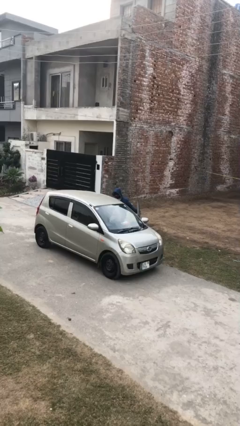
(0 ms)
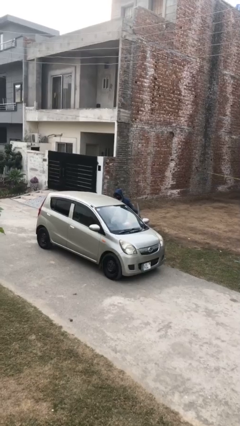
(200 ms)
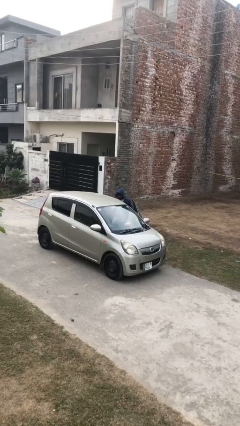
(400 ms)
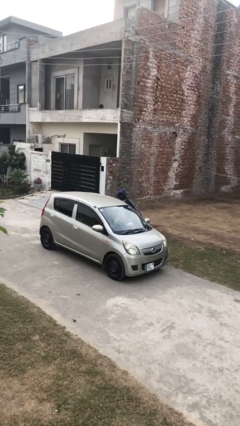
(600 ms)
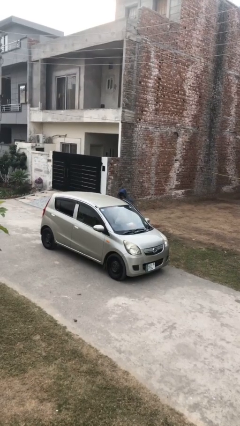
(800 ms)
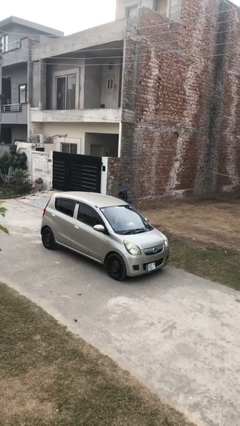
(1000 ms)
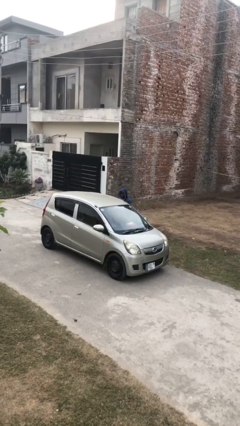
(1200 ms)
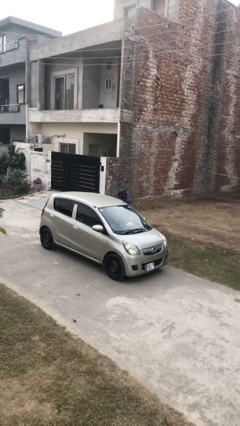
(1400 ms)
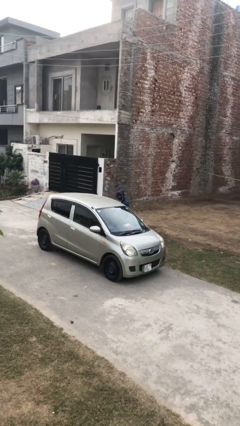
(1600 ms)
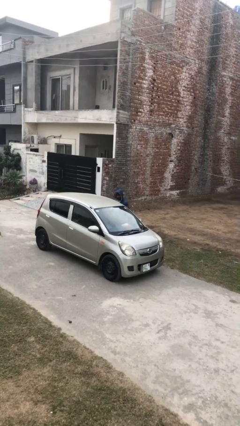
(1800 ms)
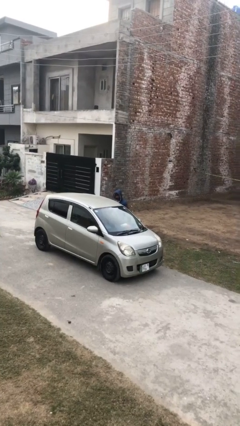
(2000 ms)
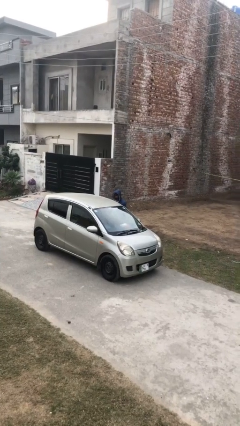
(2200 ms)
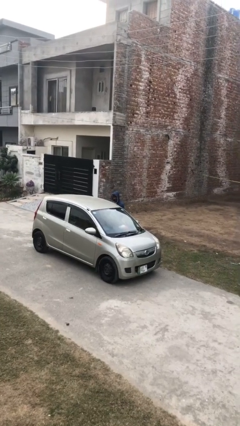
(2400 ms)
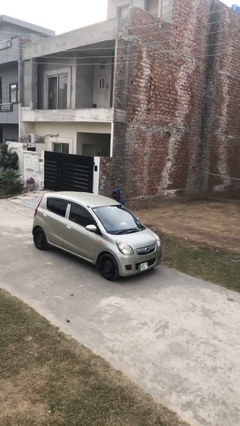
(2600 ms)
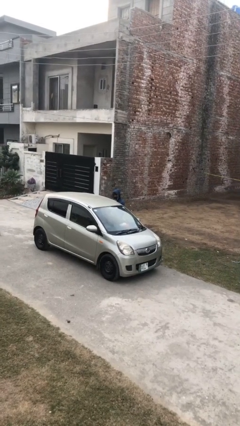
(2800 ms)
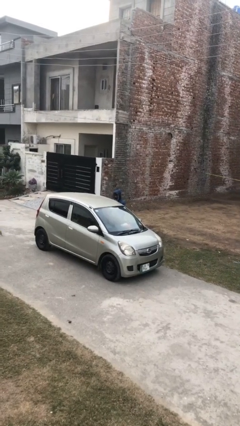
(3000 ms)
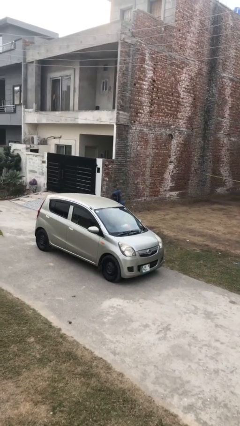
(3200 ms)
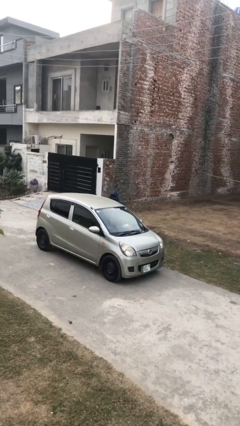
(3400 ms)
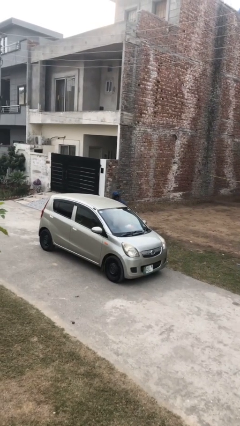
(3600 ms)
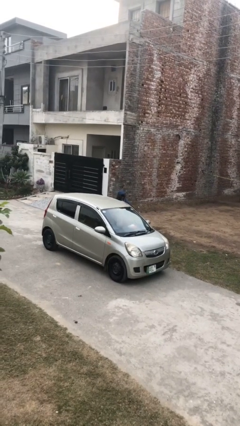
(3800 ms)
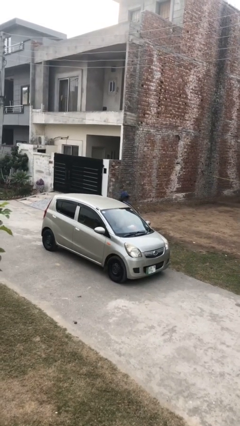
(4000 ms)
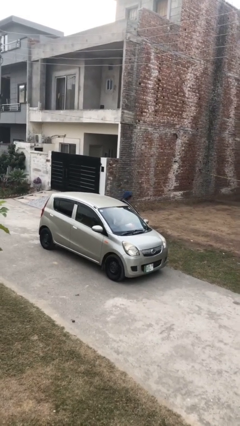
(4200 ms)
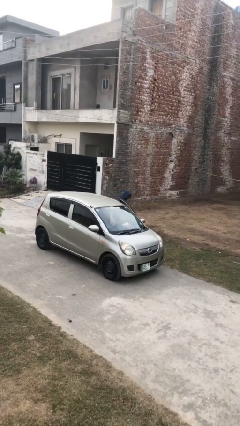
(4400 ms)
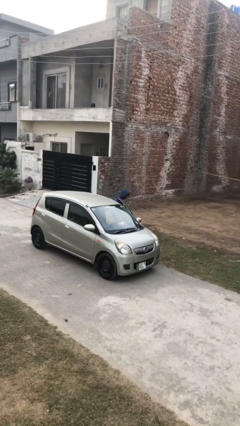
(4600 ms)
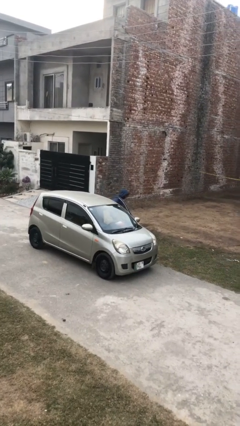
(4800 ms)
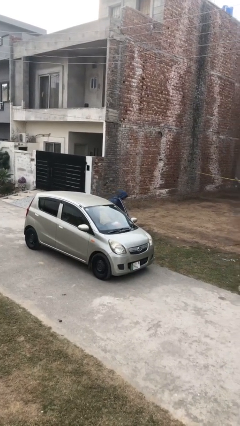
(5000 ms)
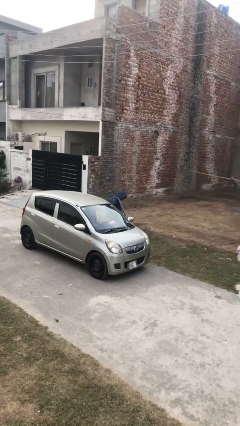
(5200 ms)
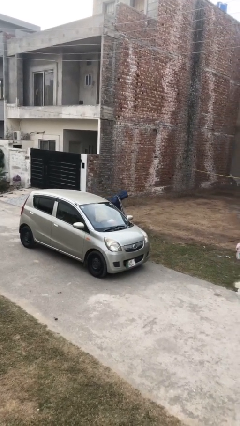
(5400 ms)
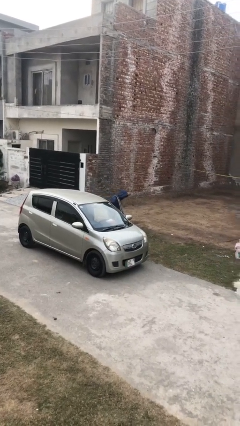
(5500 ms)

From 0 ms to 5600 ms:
person closes car door

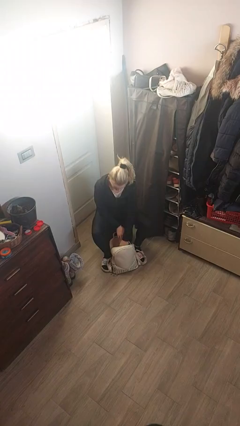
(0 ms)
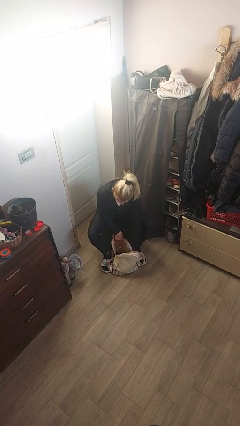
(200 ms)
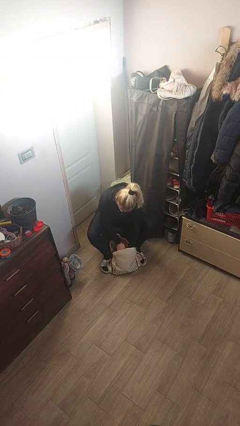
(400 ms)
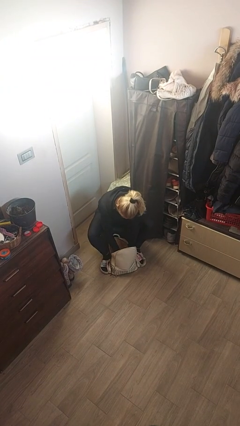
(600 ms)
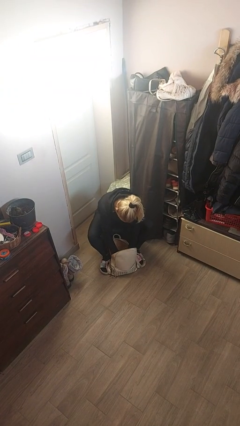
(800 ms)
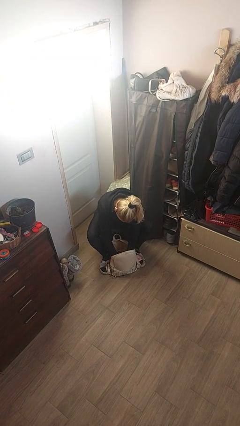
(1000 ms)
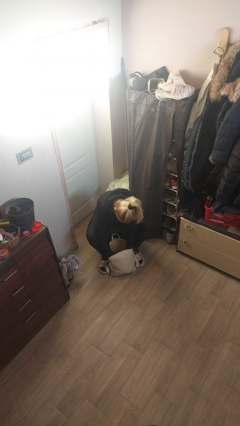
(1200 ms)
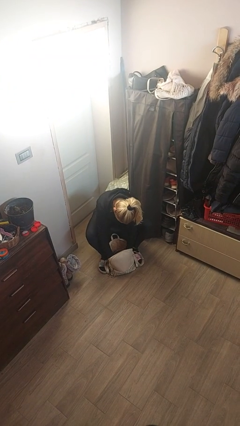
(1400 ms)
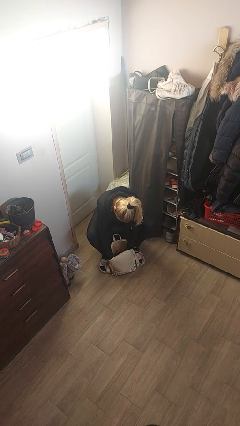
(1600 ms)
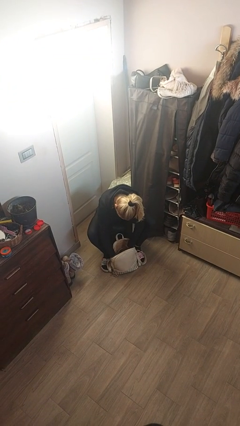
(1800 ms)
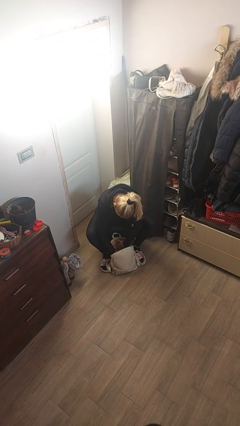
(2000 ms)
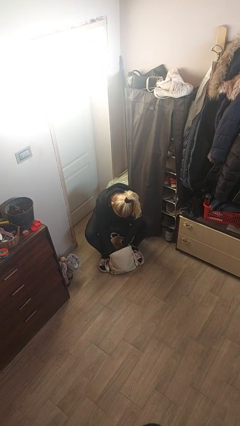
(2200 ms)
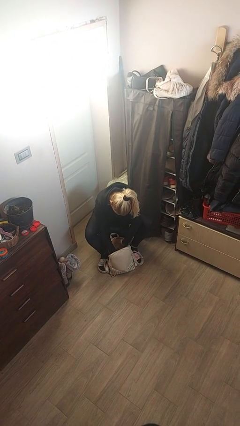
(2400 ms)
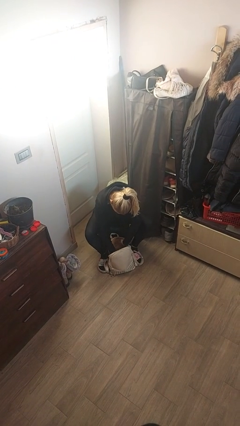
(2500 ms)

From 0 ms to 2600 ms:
person searches in backpack

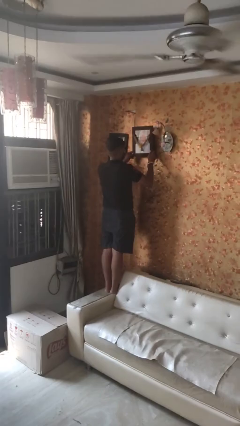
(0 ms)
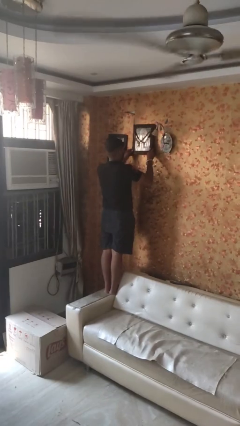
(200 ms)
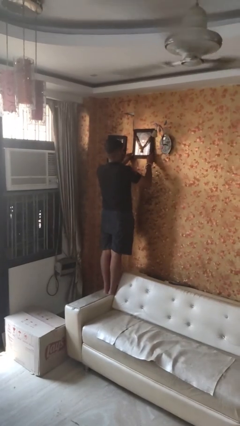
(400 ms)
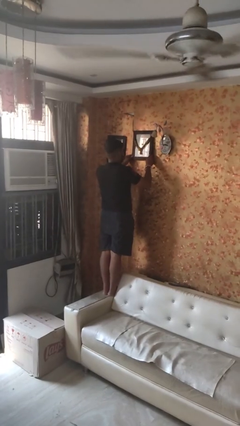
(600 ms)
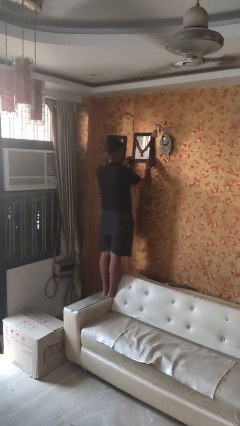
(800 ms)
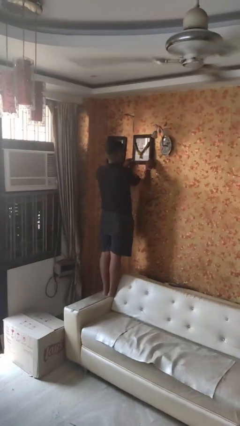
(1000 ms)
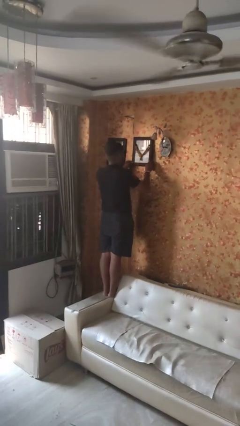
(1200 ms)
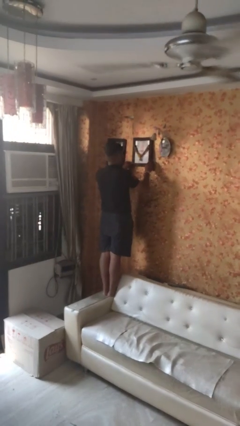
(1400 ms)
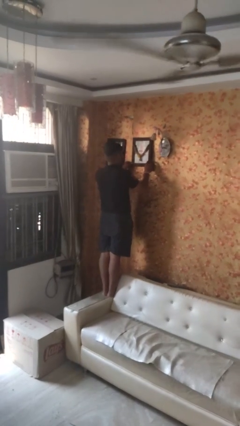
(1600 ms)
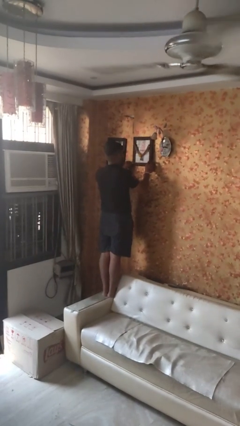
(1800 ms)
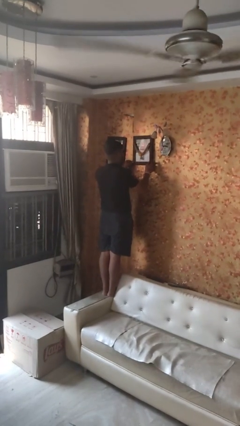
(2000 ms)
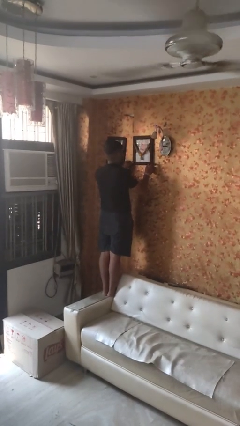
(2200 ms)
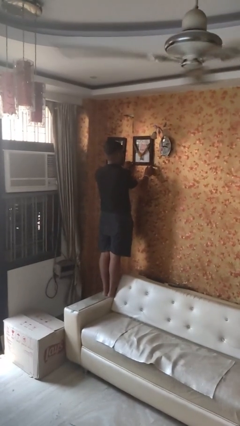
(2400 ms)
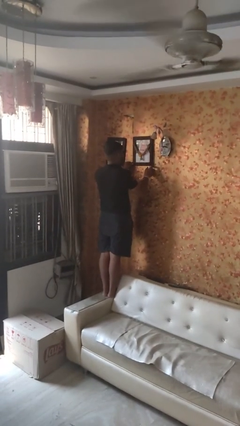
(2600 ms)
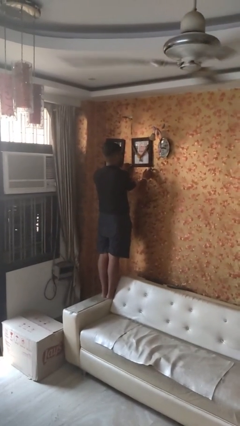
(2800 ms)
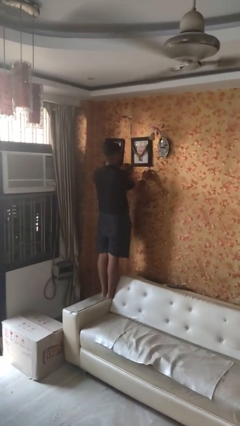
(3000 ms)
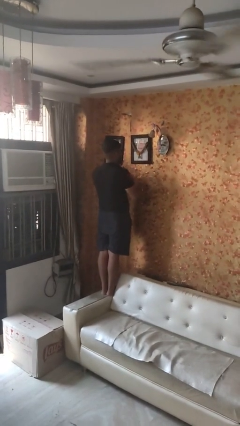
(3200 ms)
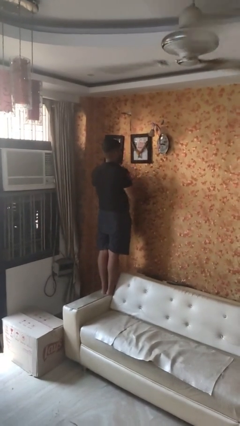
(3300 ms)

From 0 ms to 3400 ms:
person puts up picture frame

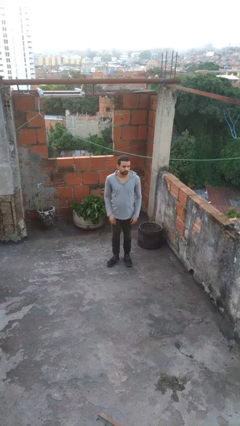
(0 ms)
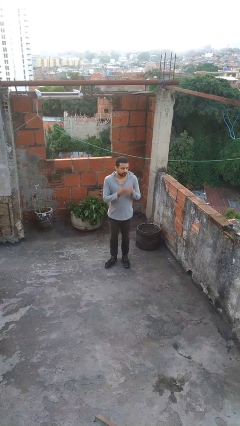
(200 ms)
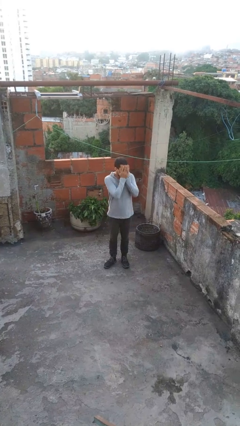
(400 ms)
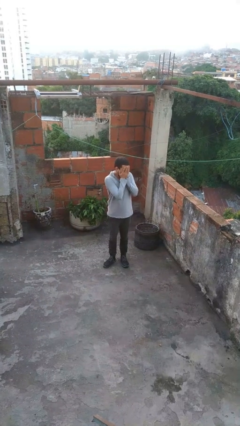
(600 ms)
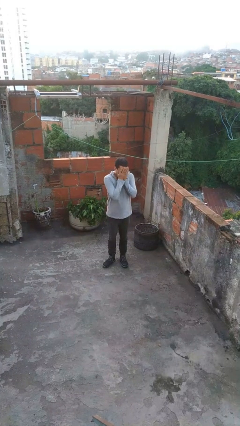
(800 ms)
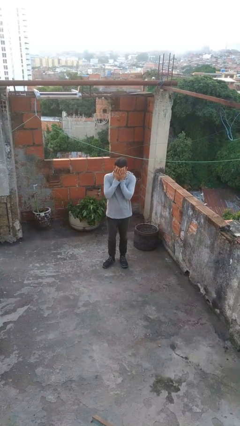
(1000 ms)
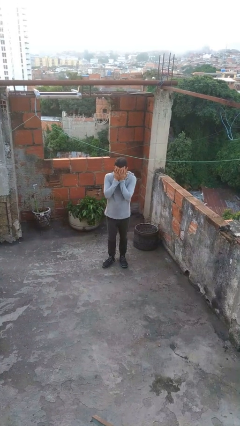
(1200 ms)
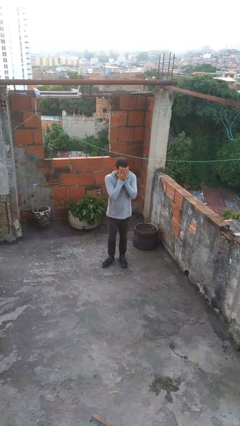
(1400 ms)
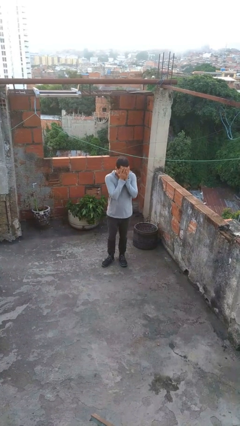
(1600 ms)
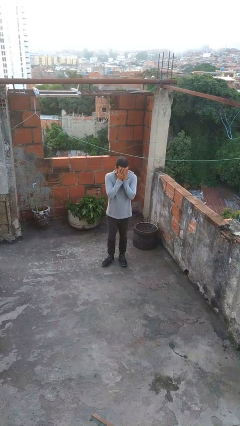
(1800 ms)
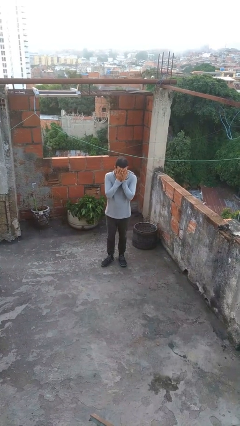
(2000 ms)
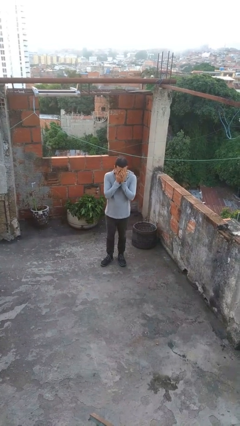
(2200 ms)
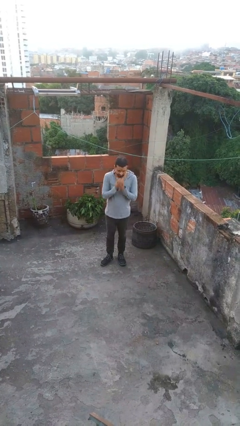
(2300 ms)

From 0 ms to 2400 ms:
person covers face with hands

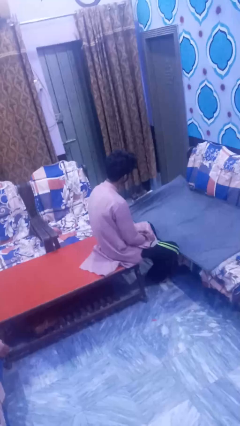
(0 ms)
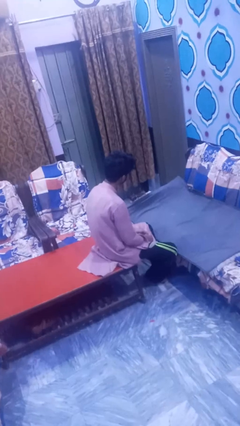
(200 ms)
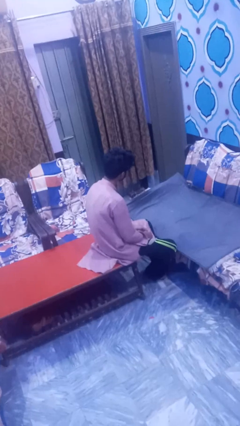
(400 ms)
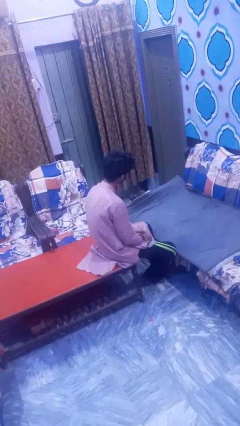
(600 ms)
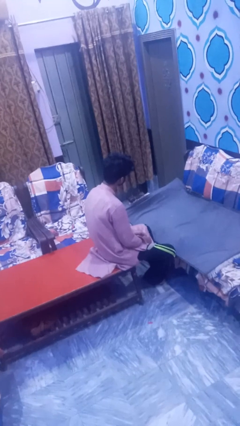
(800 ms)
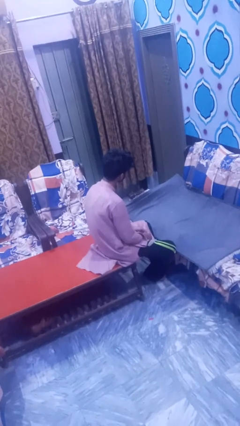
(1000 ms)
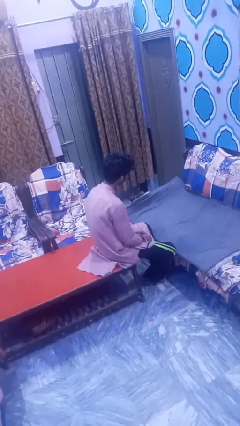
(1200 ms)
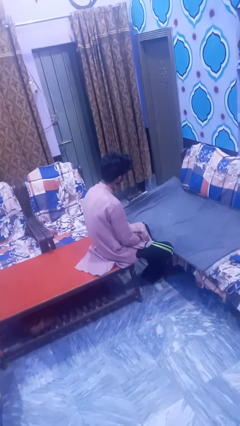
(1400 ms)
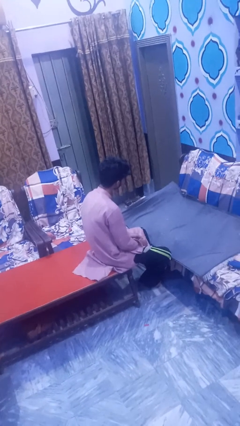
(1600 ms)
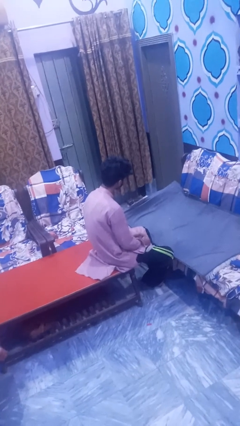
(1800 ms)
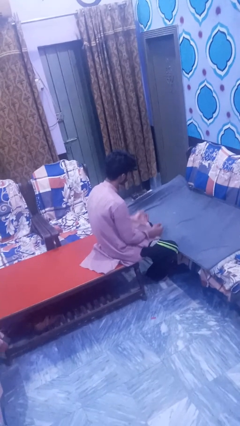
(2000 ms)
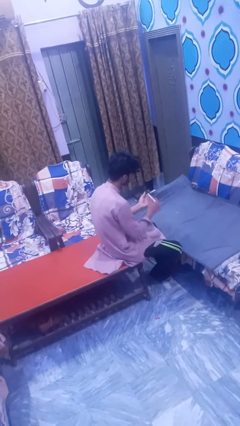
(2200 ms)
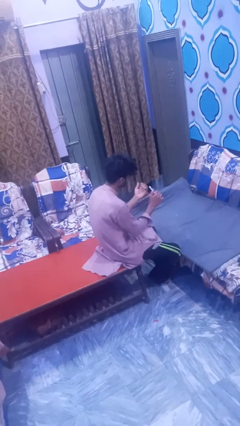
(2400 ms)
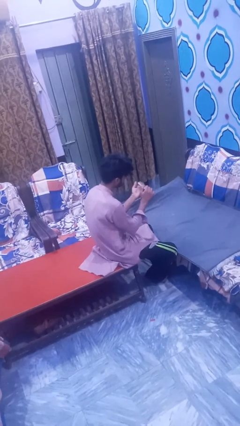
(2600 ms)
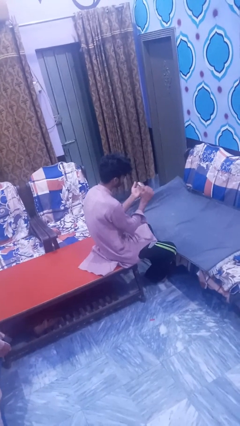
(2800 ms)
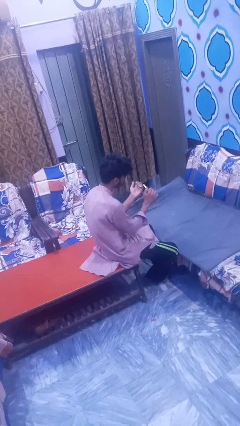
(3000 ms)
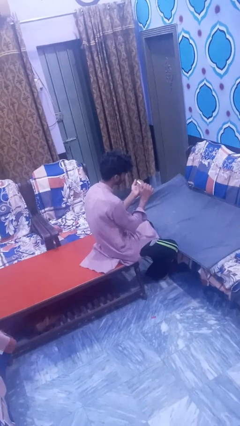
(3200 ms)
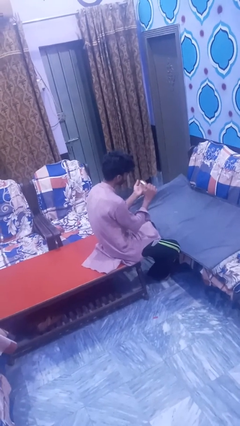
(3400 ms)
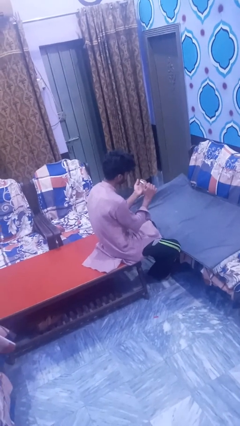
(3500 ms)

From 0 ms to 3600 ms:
person files fingernails
